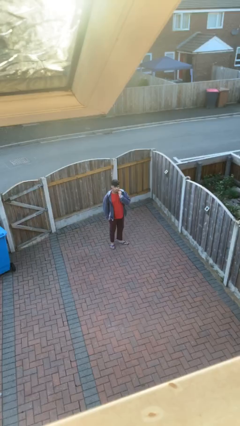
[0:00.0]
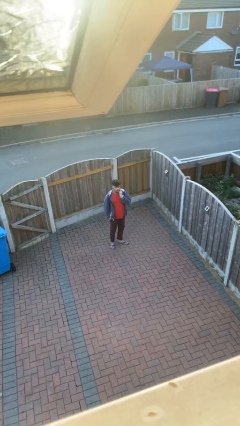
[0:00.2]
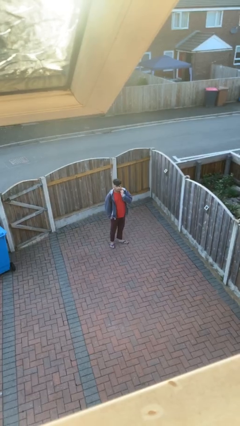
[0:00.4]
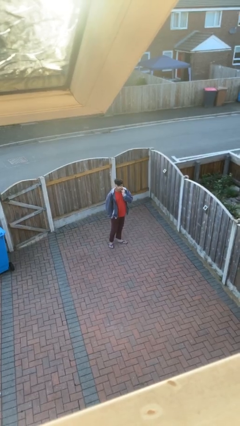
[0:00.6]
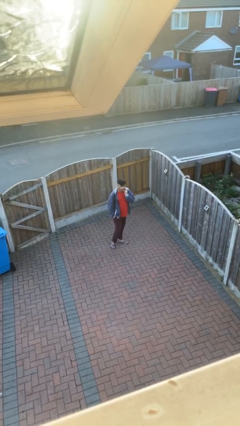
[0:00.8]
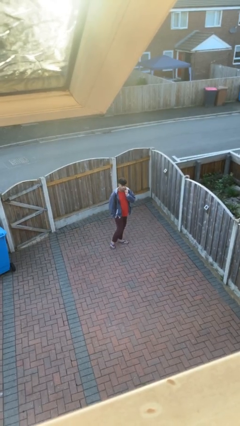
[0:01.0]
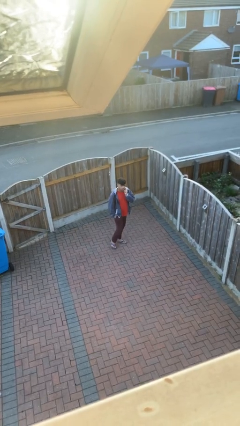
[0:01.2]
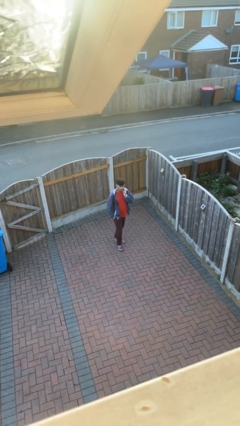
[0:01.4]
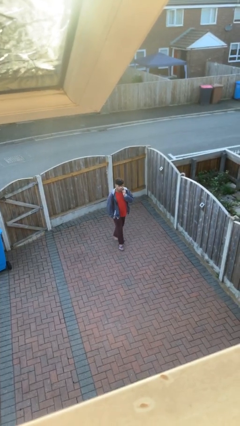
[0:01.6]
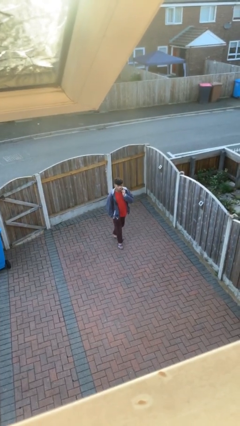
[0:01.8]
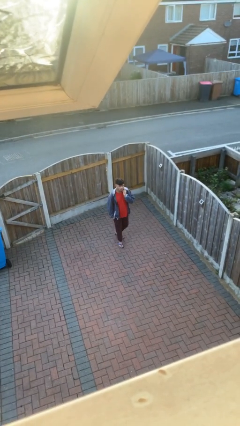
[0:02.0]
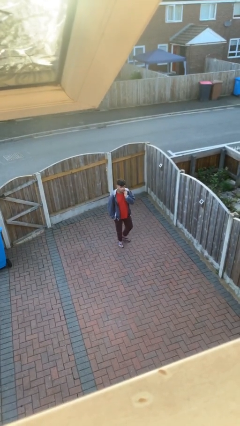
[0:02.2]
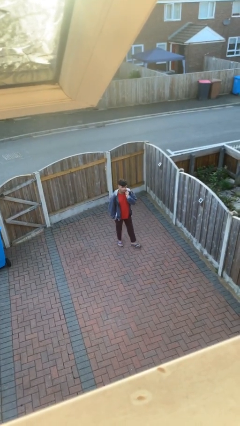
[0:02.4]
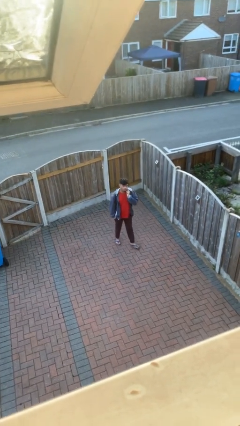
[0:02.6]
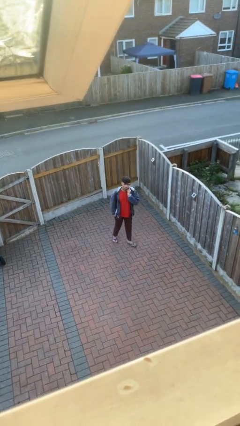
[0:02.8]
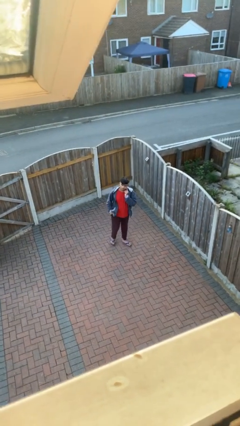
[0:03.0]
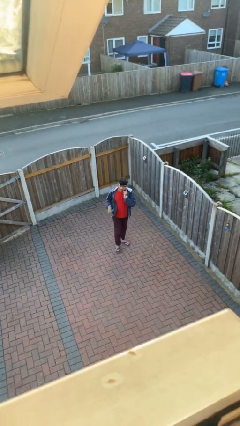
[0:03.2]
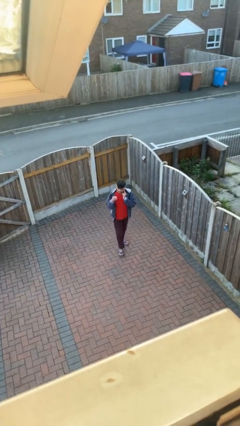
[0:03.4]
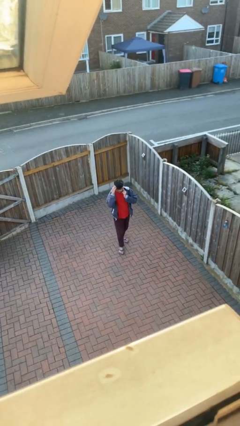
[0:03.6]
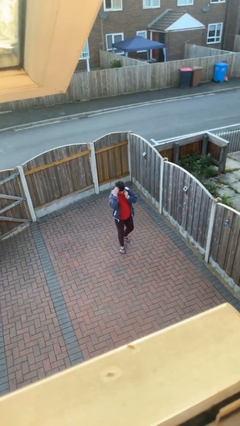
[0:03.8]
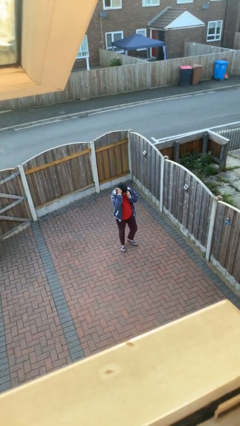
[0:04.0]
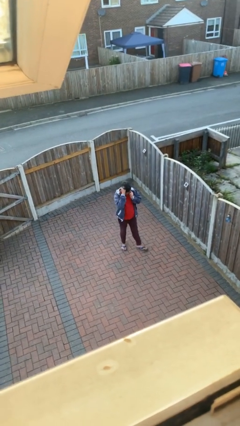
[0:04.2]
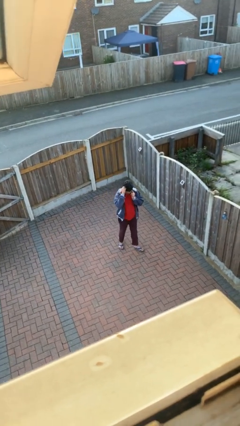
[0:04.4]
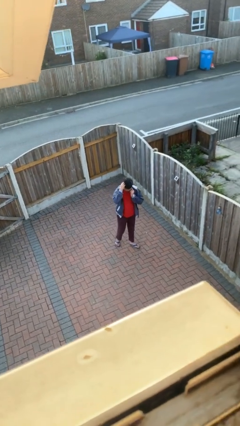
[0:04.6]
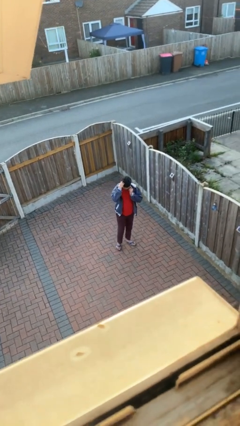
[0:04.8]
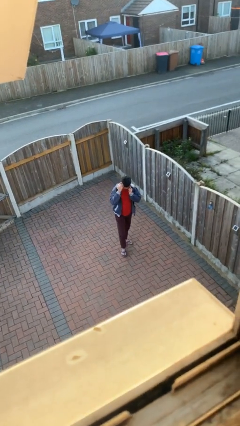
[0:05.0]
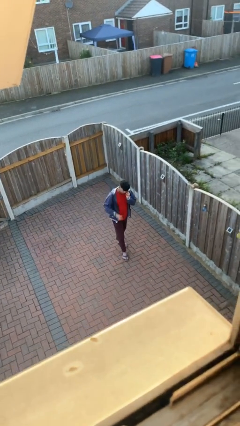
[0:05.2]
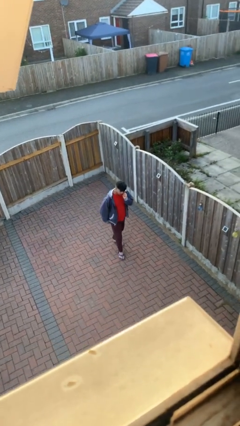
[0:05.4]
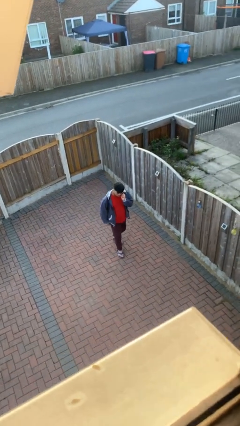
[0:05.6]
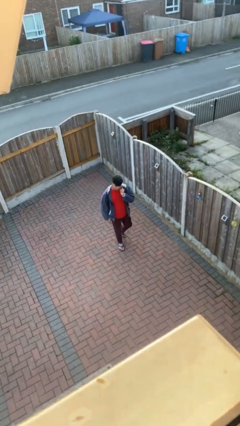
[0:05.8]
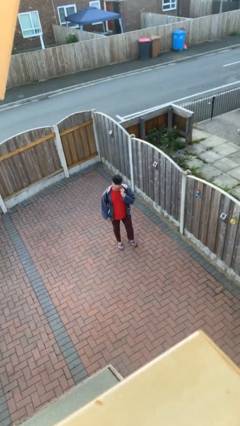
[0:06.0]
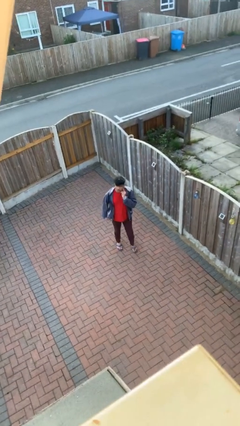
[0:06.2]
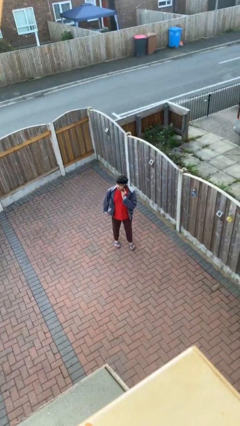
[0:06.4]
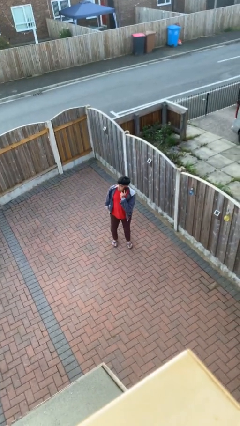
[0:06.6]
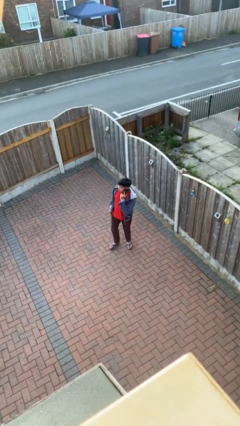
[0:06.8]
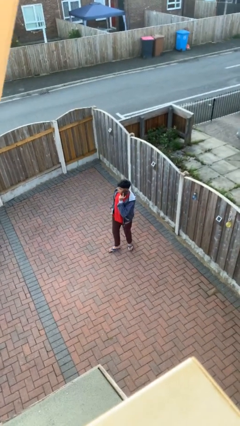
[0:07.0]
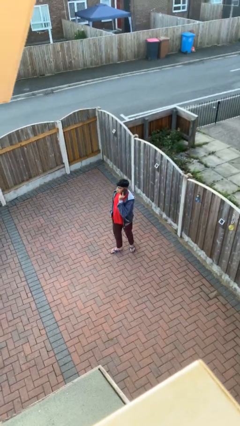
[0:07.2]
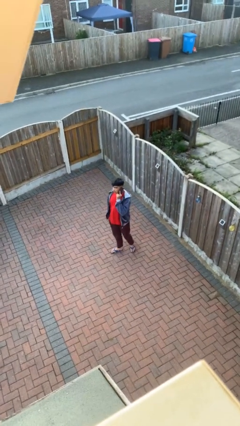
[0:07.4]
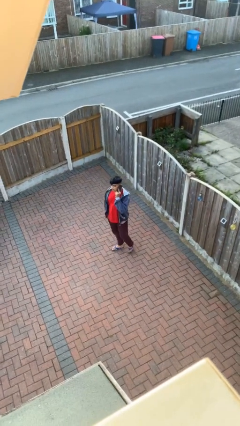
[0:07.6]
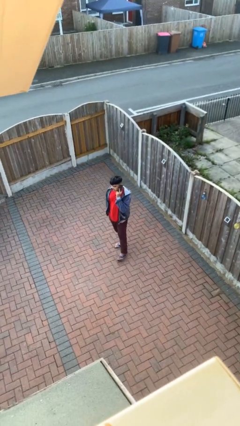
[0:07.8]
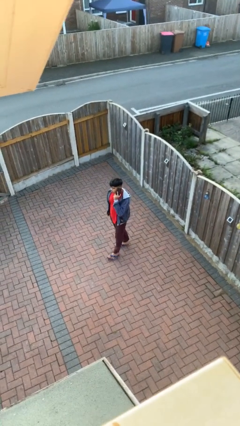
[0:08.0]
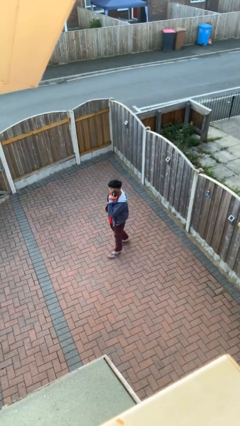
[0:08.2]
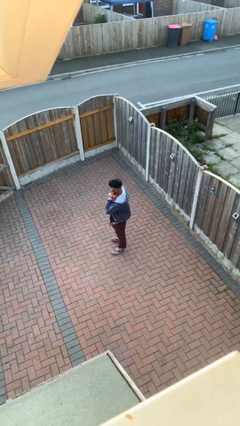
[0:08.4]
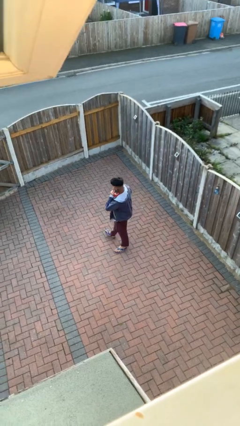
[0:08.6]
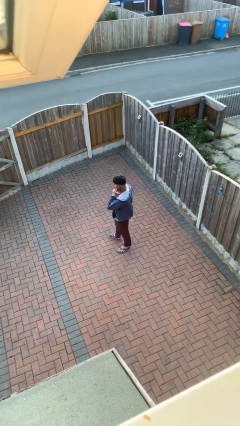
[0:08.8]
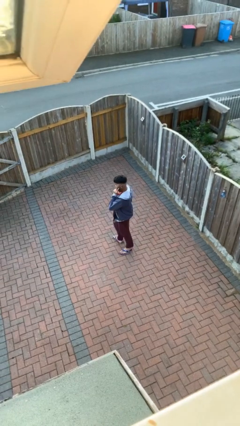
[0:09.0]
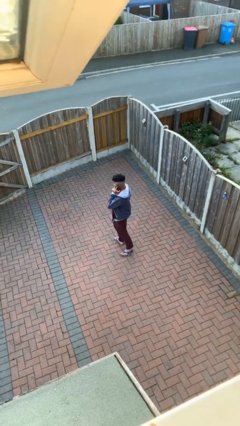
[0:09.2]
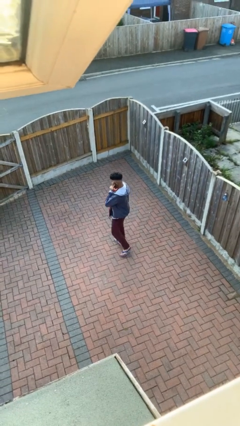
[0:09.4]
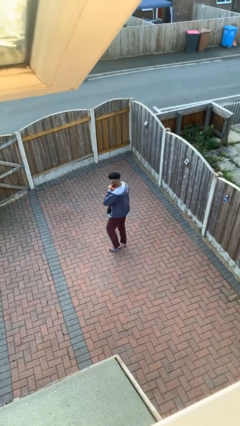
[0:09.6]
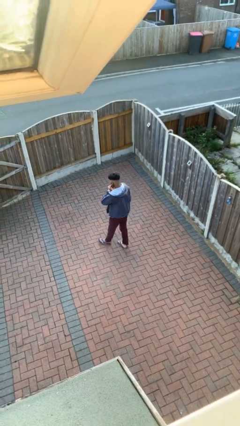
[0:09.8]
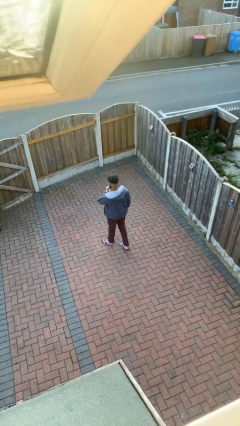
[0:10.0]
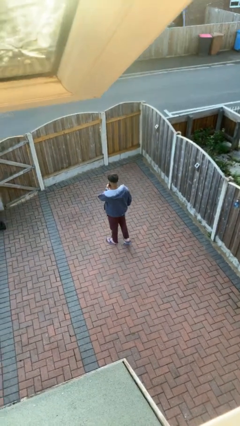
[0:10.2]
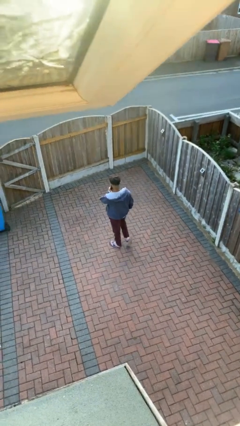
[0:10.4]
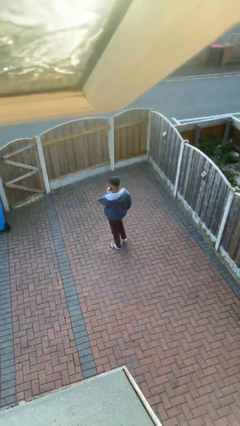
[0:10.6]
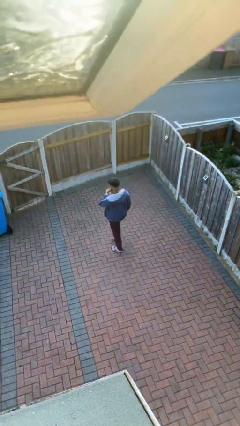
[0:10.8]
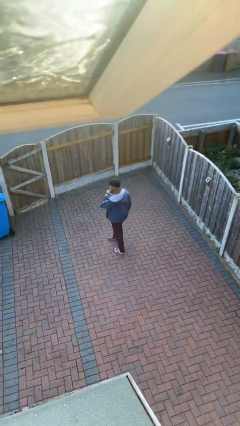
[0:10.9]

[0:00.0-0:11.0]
person talks on phone

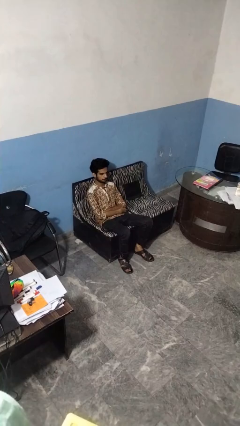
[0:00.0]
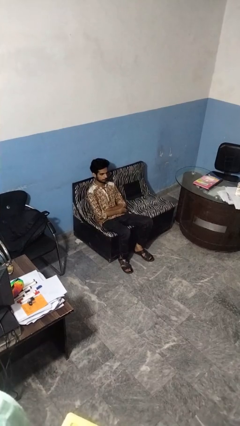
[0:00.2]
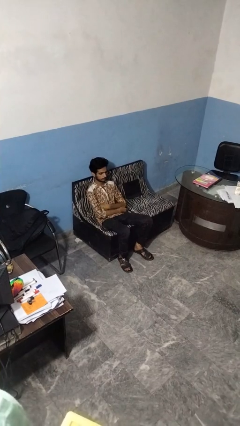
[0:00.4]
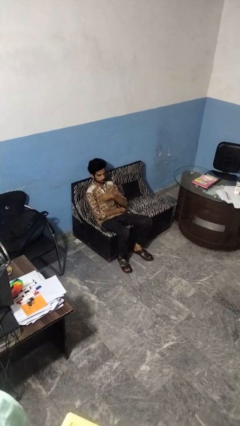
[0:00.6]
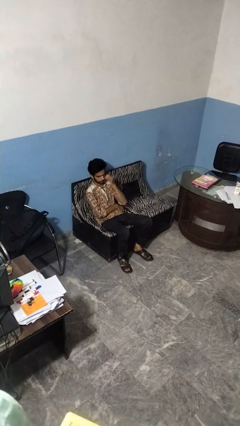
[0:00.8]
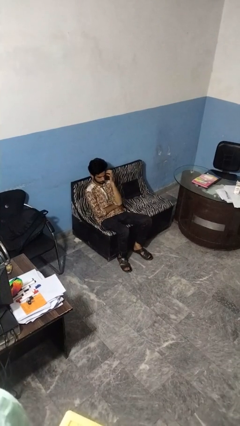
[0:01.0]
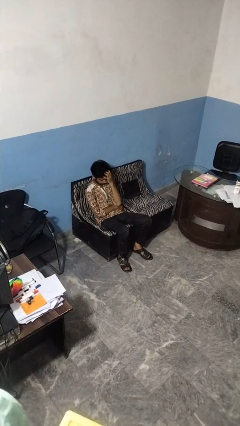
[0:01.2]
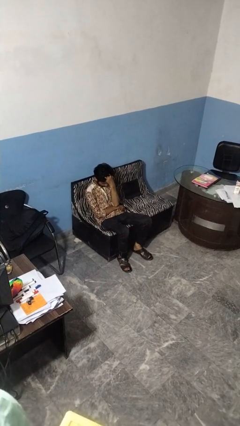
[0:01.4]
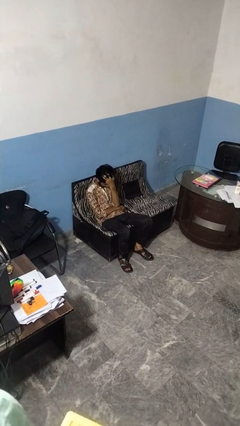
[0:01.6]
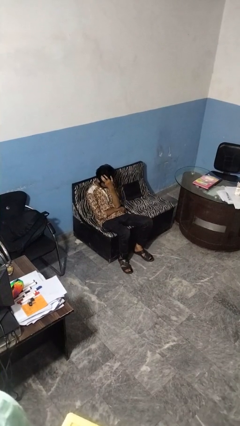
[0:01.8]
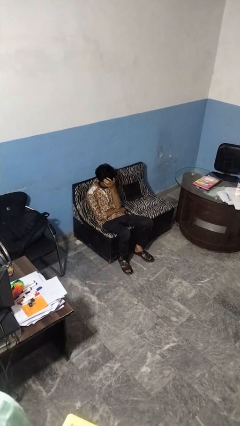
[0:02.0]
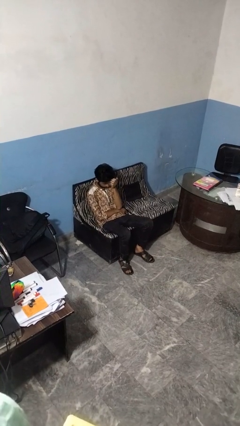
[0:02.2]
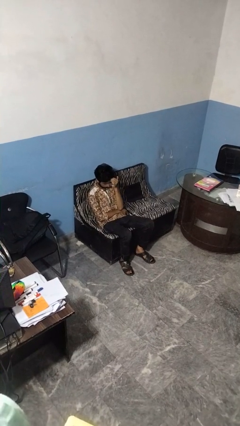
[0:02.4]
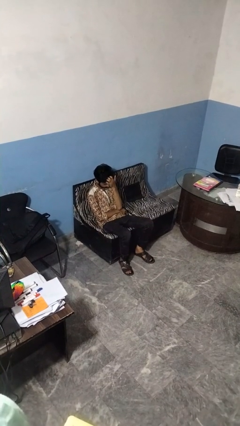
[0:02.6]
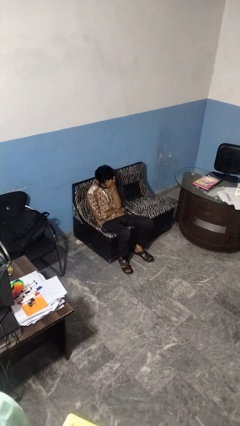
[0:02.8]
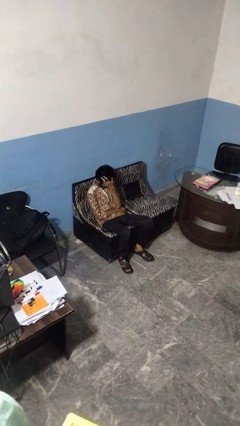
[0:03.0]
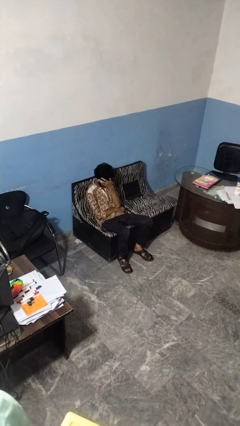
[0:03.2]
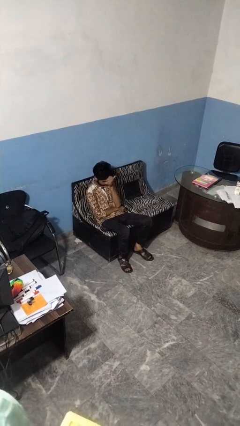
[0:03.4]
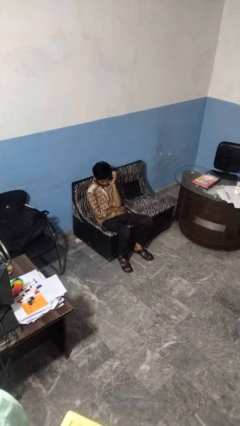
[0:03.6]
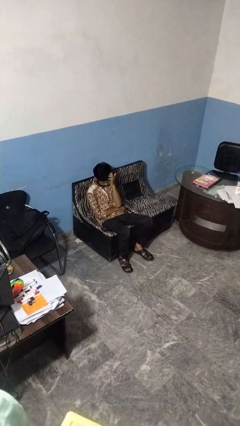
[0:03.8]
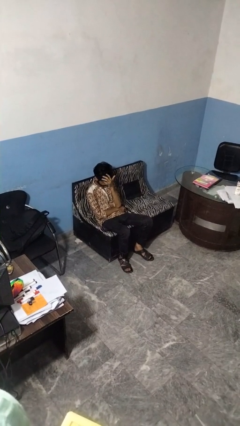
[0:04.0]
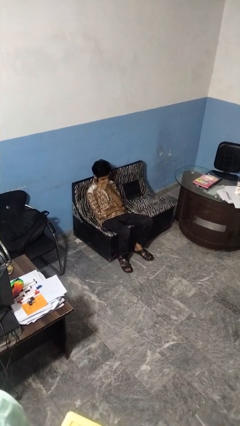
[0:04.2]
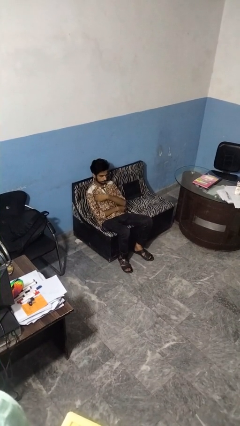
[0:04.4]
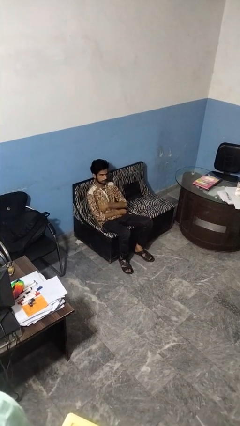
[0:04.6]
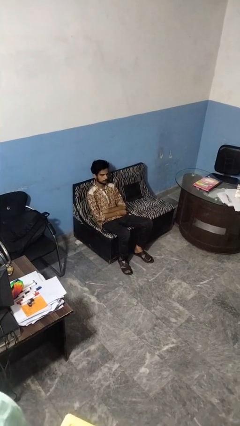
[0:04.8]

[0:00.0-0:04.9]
person strokes hair

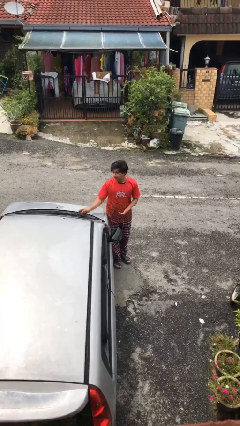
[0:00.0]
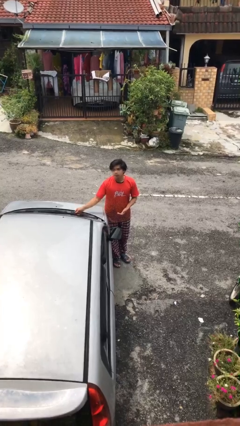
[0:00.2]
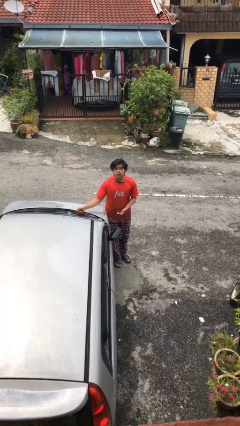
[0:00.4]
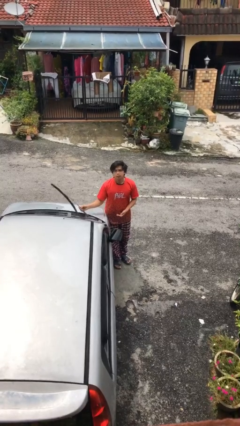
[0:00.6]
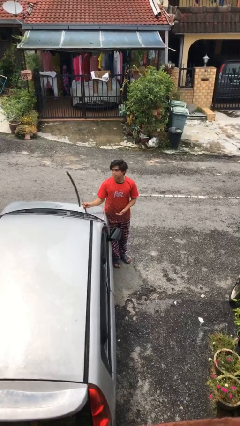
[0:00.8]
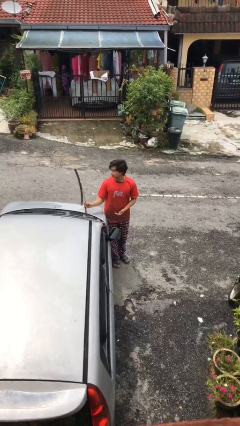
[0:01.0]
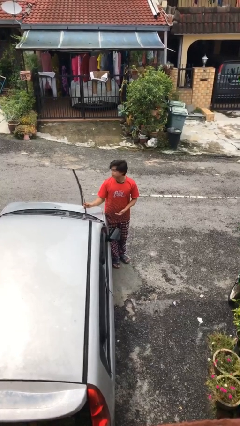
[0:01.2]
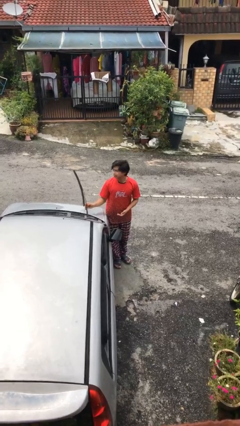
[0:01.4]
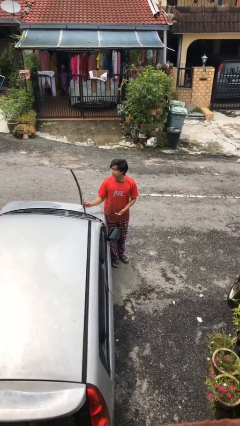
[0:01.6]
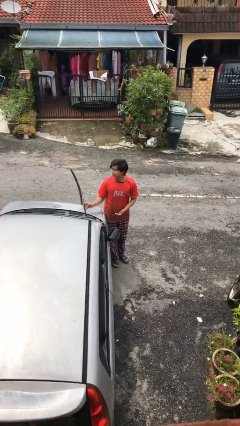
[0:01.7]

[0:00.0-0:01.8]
person flips up car wipers

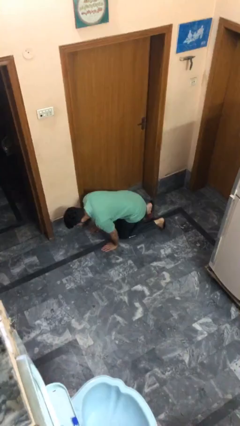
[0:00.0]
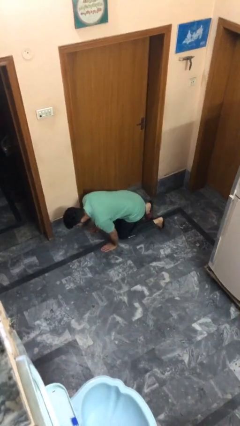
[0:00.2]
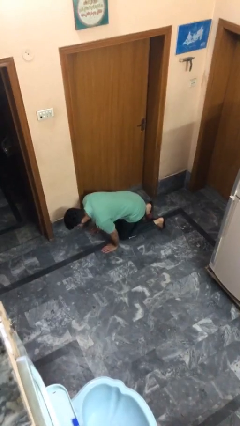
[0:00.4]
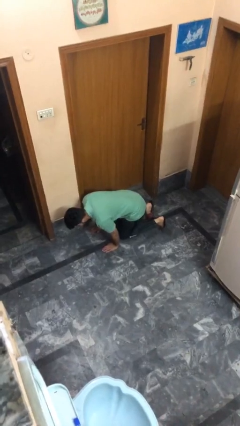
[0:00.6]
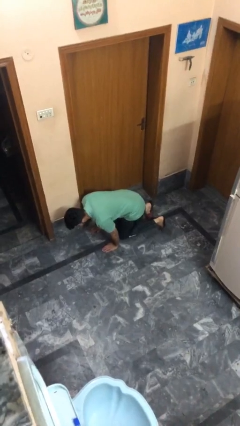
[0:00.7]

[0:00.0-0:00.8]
person crawls
